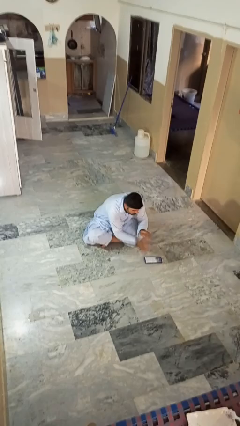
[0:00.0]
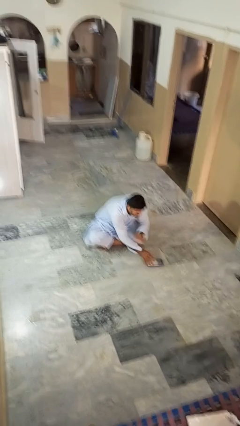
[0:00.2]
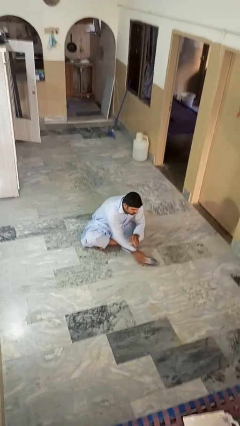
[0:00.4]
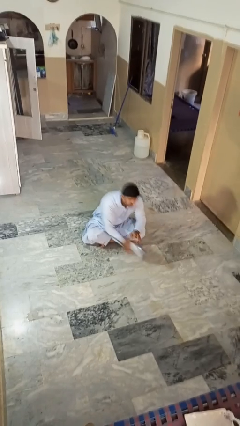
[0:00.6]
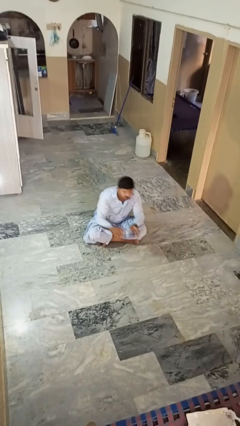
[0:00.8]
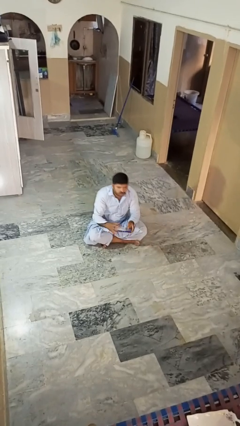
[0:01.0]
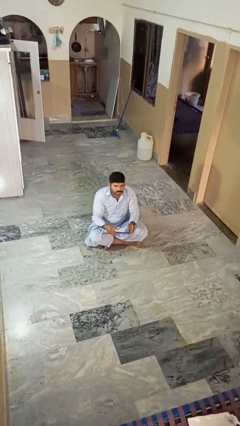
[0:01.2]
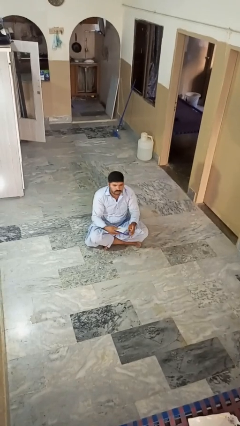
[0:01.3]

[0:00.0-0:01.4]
person picks up object from floor

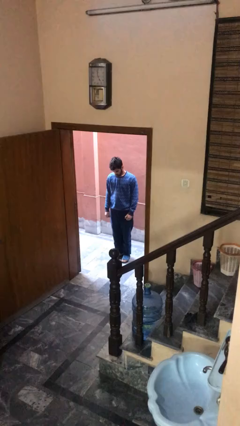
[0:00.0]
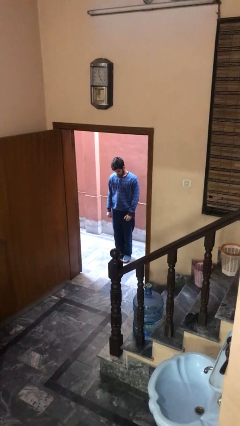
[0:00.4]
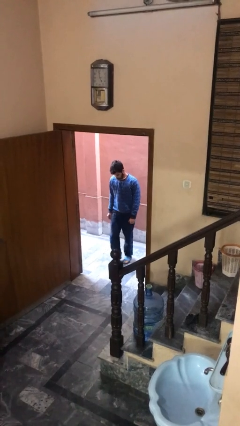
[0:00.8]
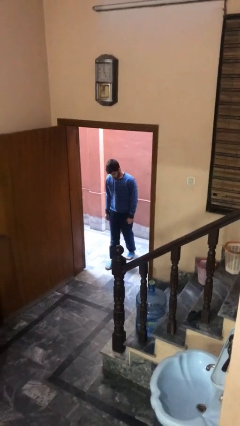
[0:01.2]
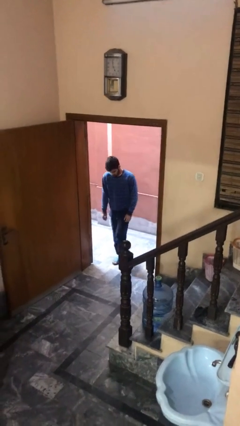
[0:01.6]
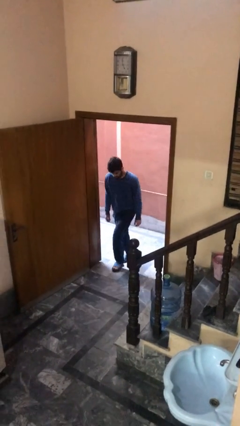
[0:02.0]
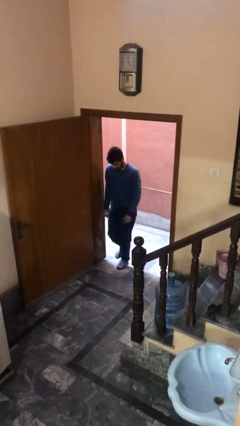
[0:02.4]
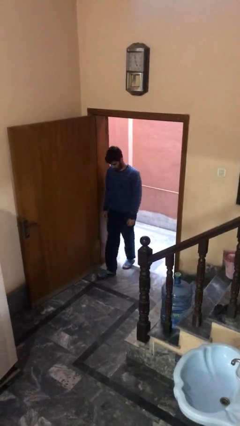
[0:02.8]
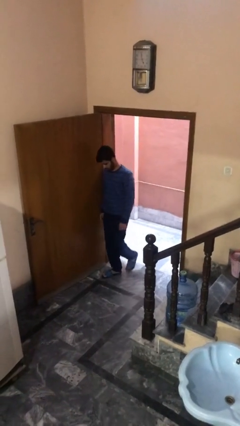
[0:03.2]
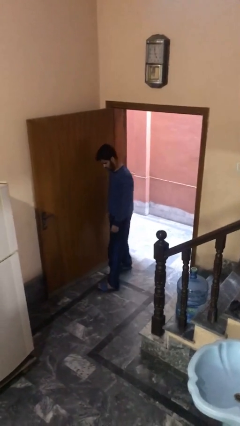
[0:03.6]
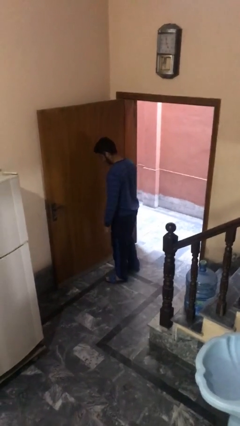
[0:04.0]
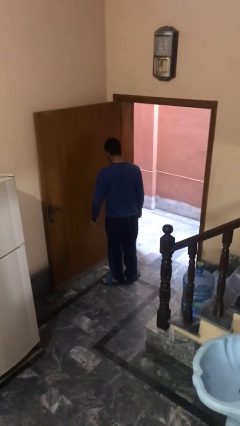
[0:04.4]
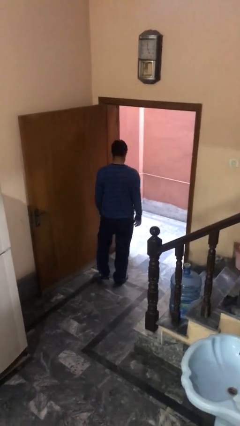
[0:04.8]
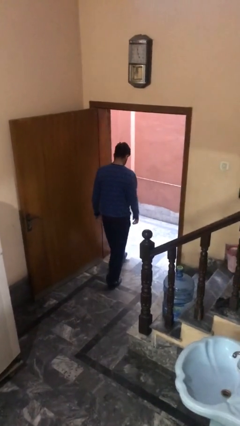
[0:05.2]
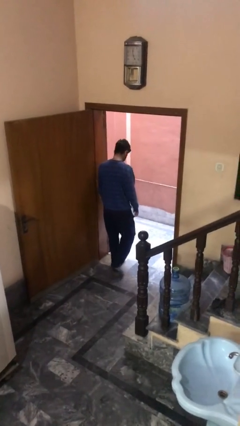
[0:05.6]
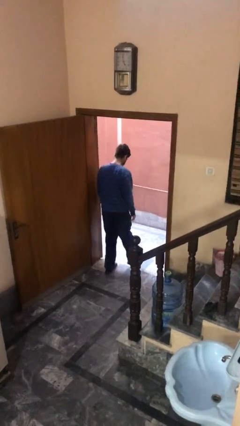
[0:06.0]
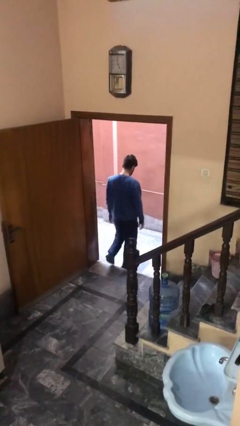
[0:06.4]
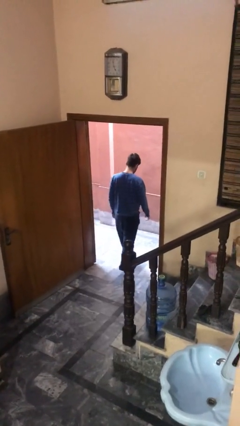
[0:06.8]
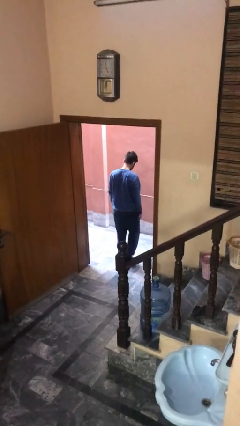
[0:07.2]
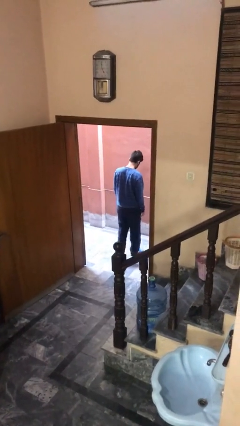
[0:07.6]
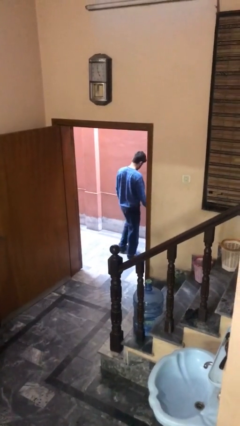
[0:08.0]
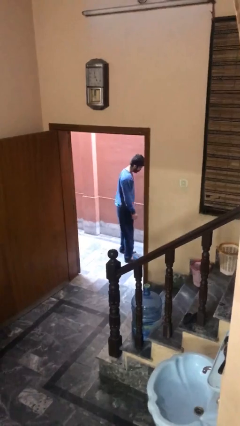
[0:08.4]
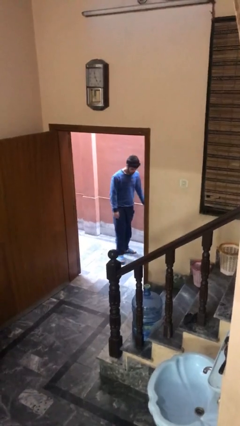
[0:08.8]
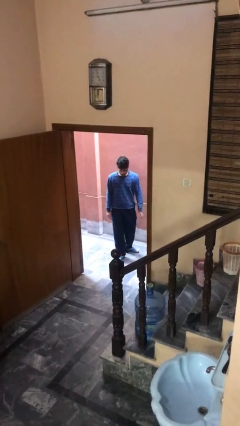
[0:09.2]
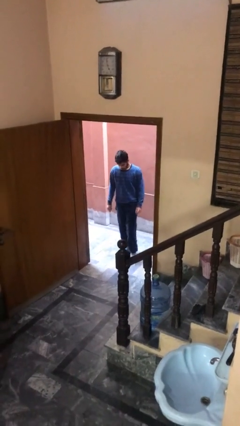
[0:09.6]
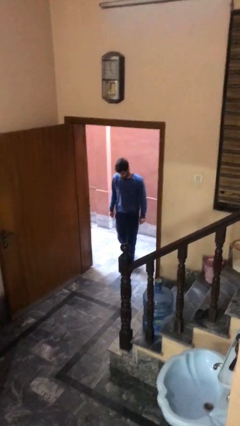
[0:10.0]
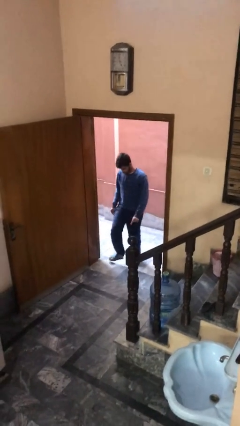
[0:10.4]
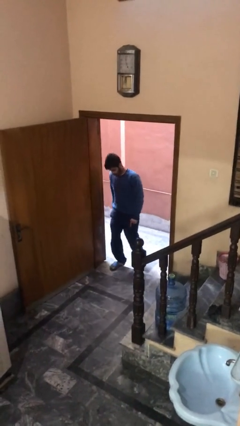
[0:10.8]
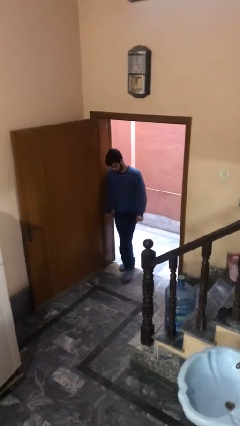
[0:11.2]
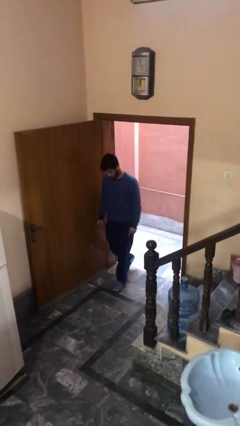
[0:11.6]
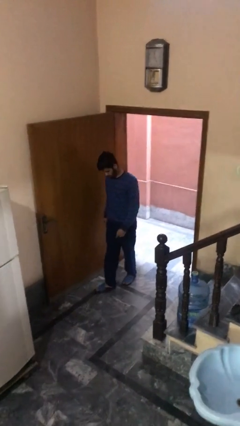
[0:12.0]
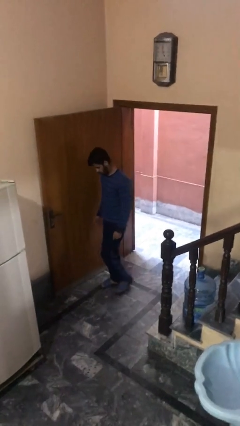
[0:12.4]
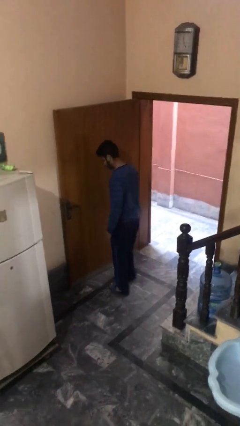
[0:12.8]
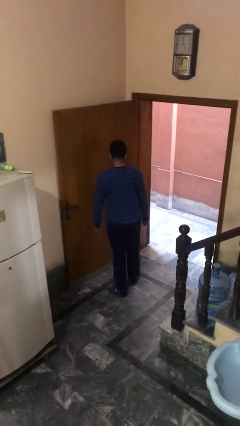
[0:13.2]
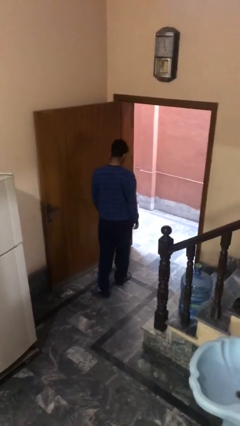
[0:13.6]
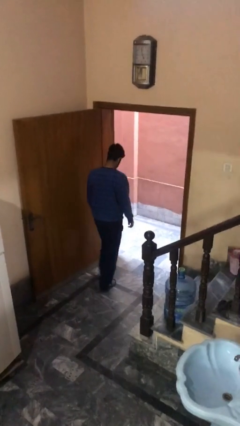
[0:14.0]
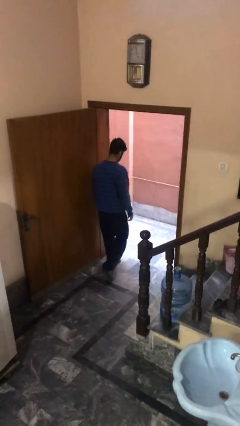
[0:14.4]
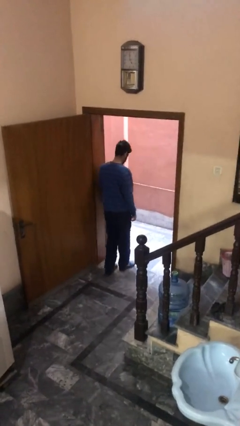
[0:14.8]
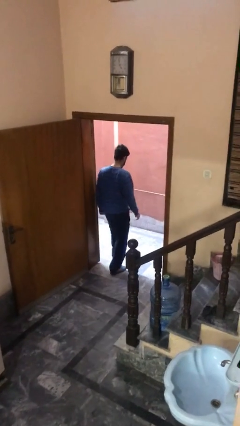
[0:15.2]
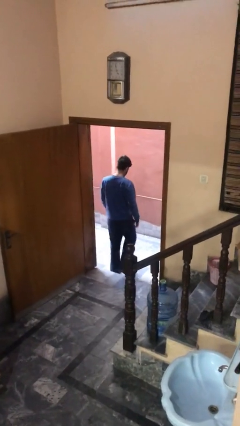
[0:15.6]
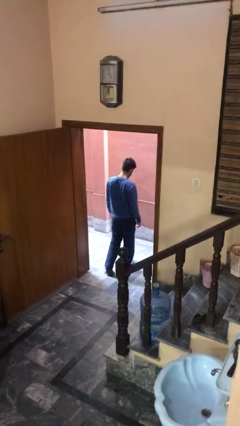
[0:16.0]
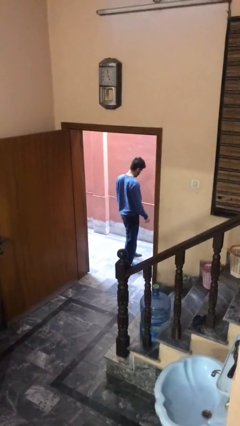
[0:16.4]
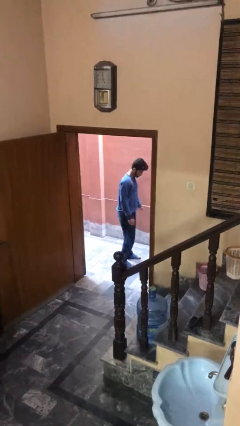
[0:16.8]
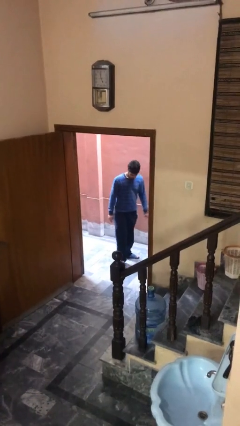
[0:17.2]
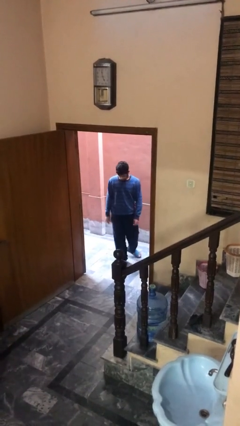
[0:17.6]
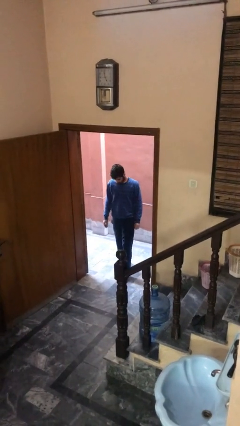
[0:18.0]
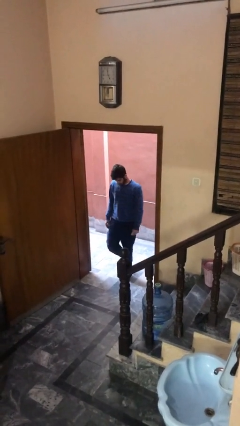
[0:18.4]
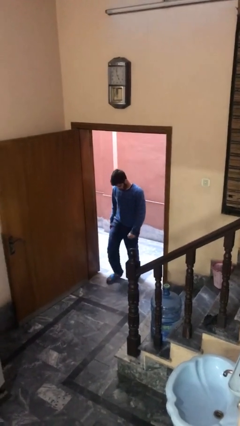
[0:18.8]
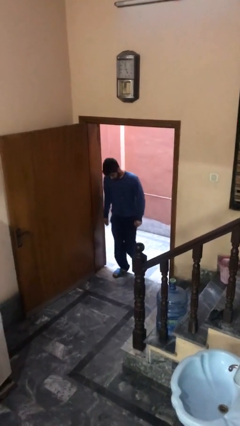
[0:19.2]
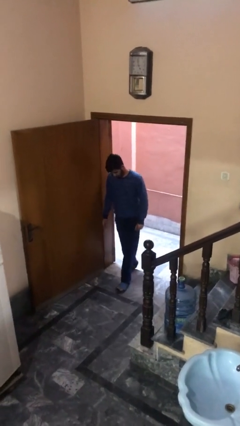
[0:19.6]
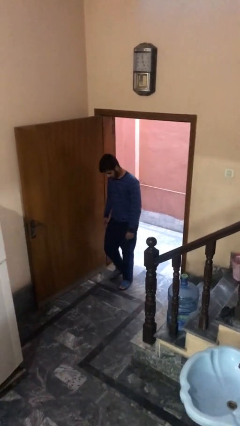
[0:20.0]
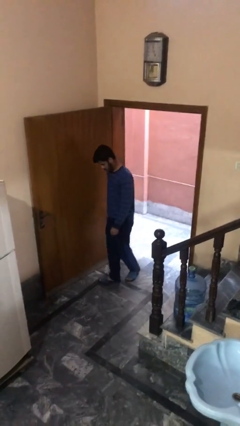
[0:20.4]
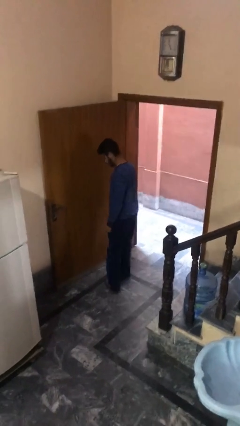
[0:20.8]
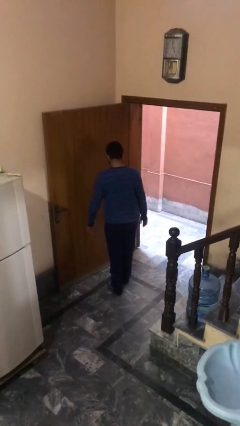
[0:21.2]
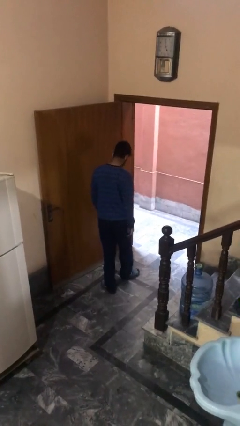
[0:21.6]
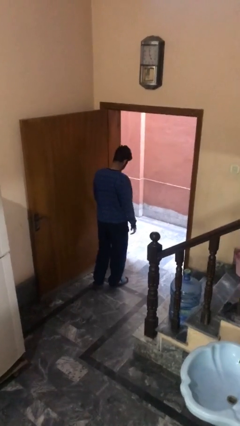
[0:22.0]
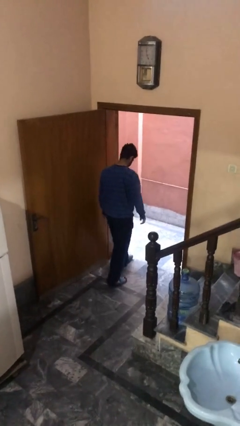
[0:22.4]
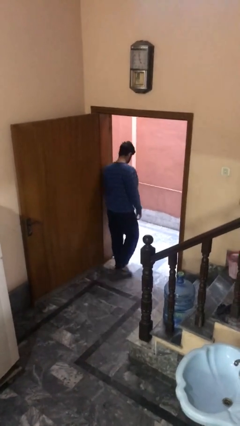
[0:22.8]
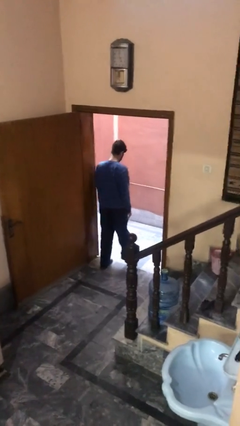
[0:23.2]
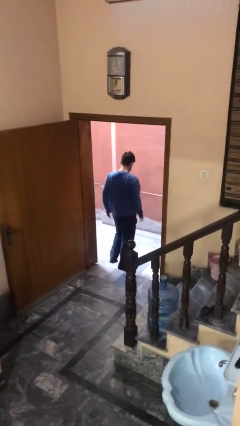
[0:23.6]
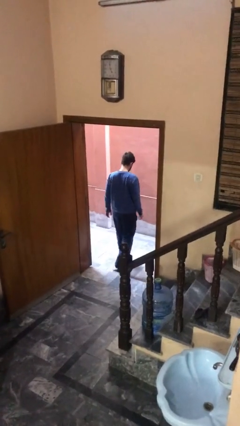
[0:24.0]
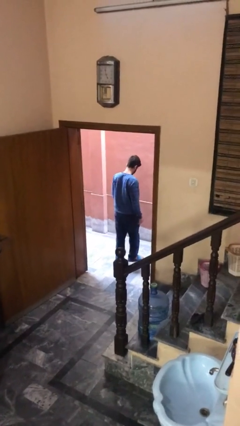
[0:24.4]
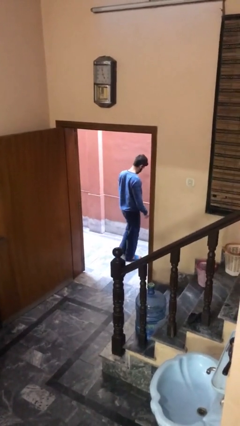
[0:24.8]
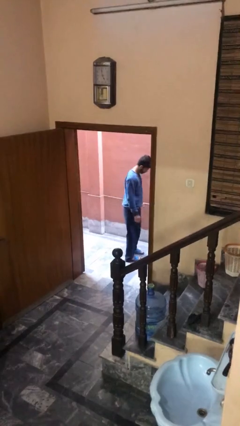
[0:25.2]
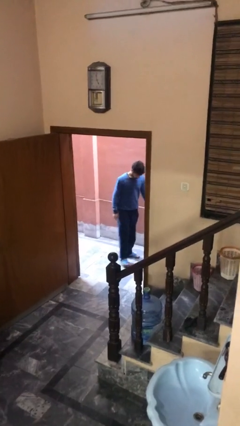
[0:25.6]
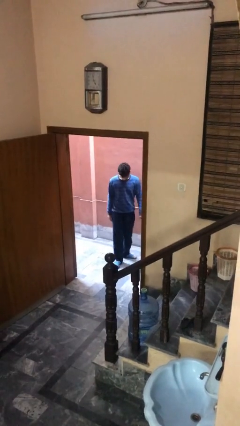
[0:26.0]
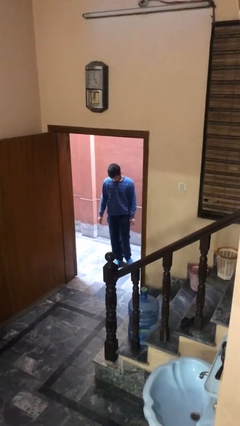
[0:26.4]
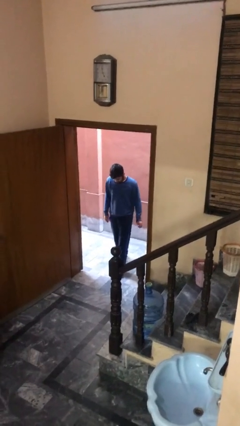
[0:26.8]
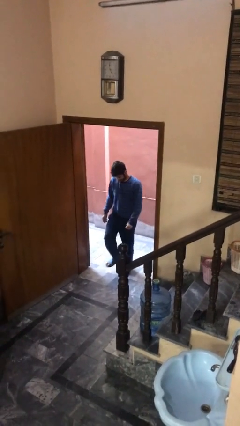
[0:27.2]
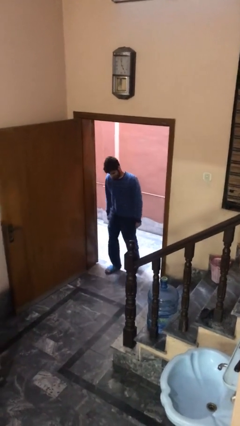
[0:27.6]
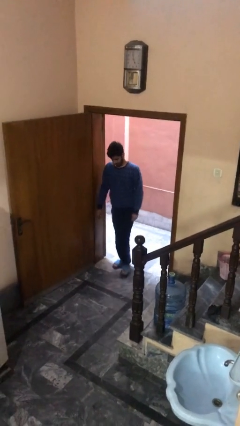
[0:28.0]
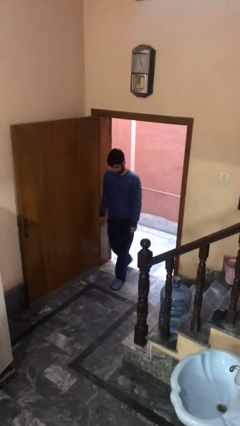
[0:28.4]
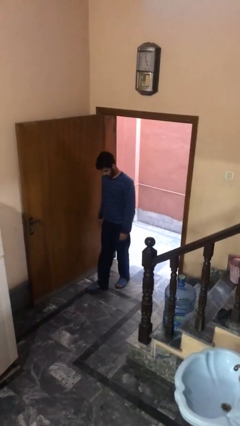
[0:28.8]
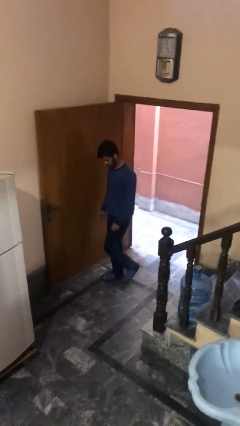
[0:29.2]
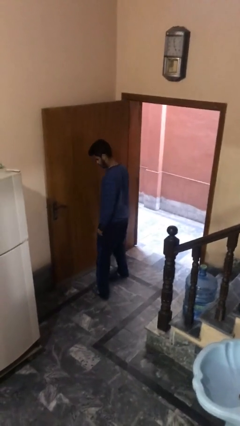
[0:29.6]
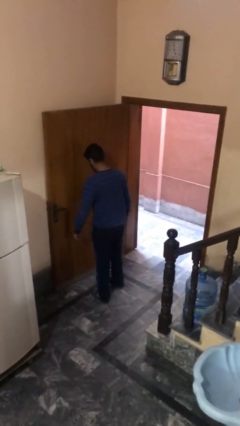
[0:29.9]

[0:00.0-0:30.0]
person walks

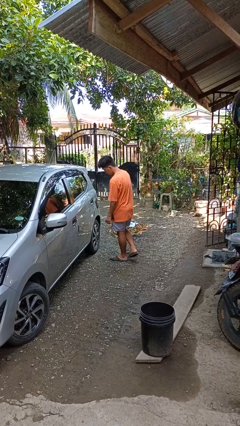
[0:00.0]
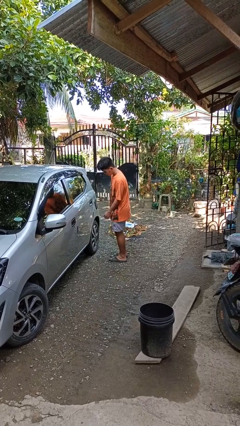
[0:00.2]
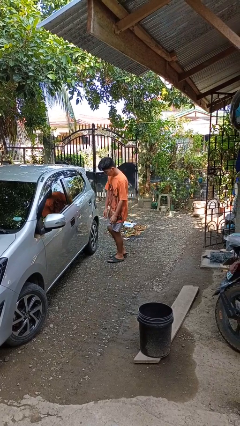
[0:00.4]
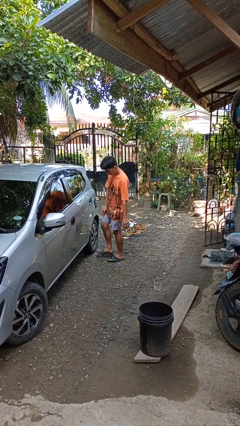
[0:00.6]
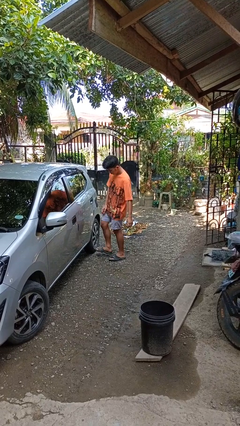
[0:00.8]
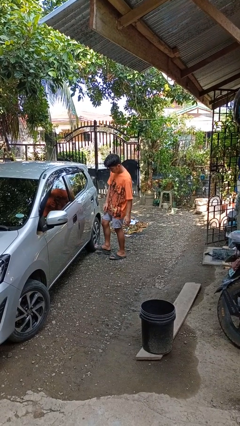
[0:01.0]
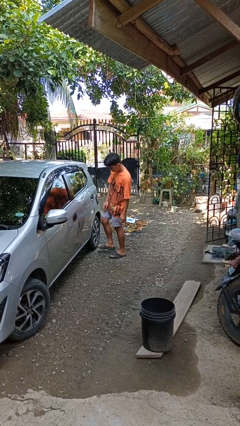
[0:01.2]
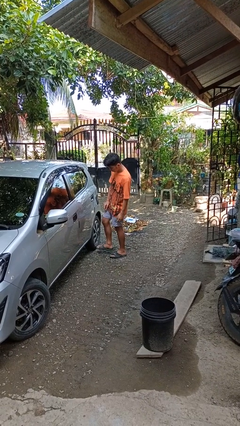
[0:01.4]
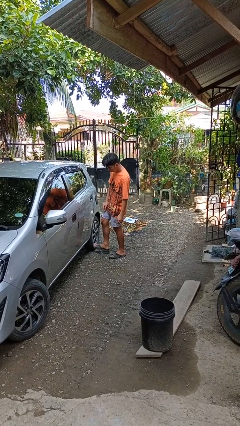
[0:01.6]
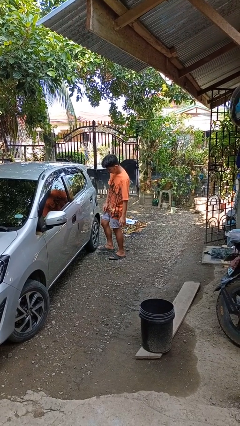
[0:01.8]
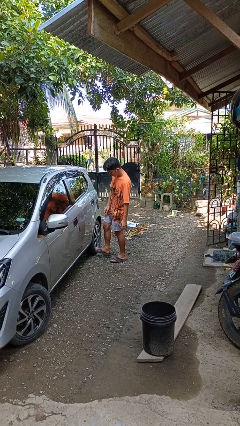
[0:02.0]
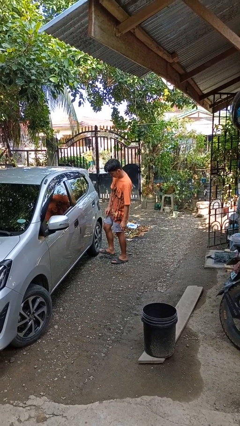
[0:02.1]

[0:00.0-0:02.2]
person kicks car tires
